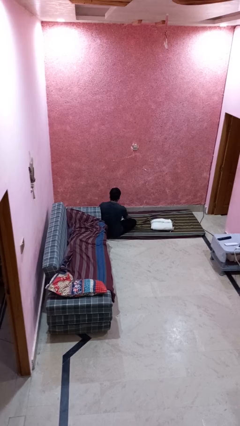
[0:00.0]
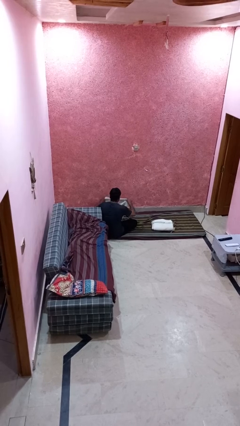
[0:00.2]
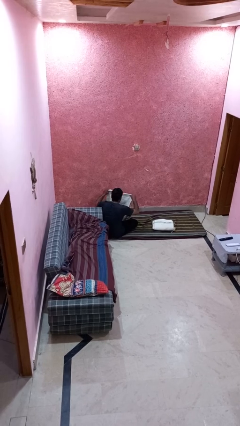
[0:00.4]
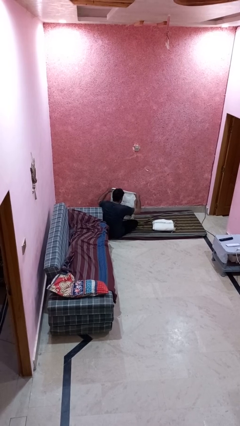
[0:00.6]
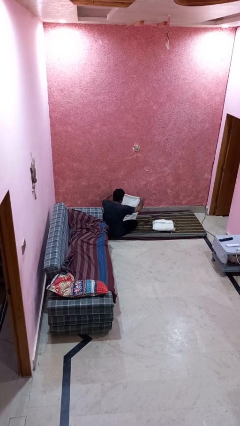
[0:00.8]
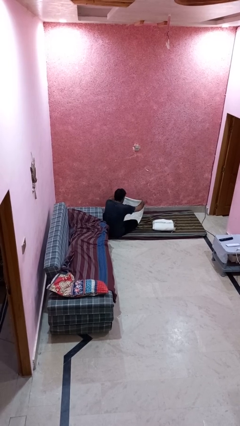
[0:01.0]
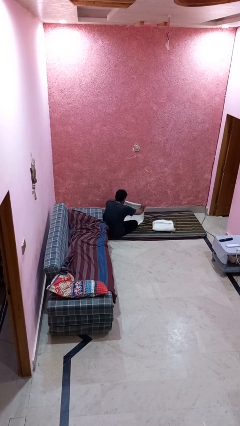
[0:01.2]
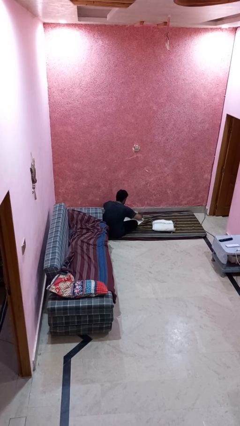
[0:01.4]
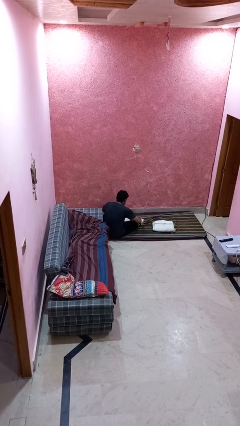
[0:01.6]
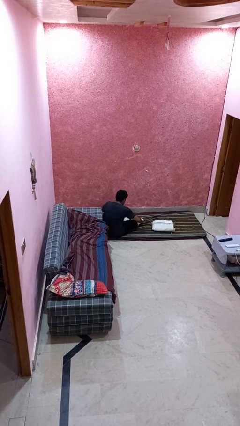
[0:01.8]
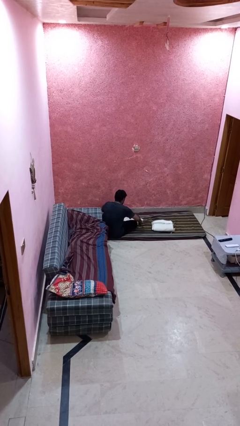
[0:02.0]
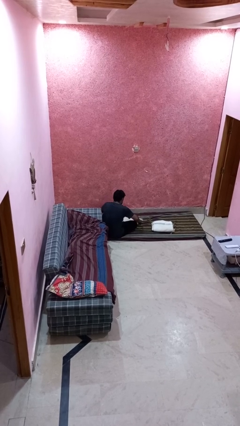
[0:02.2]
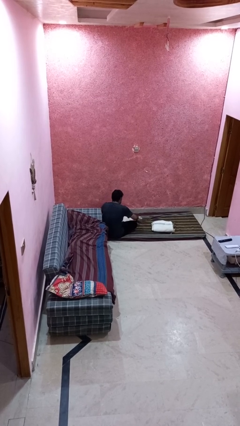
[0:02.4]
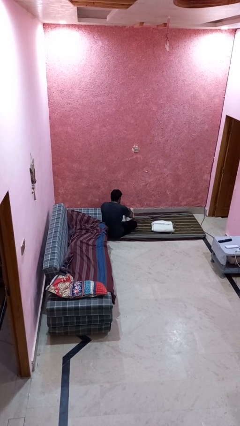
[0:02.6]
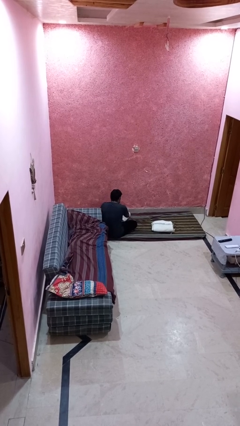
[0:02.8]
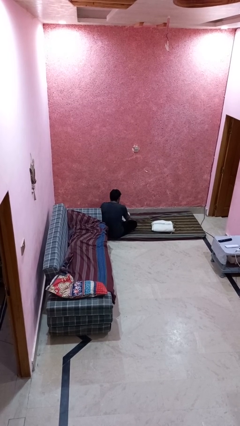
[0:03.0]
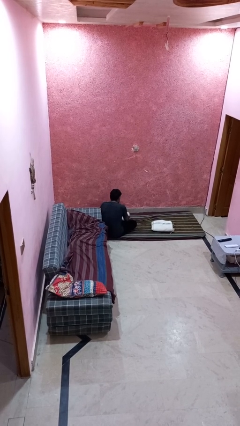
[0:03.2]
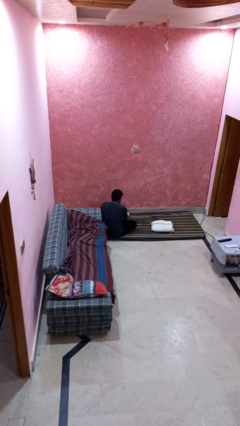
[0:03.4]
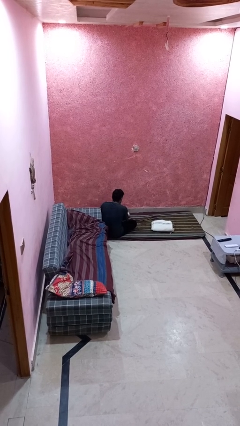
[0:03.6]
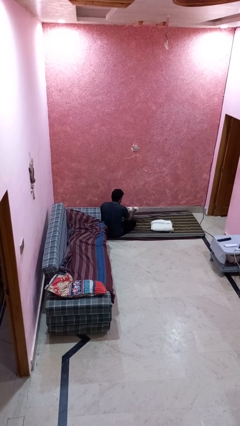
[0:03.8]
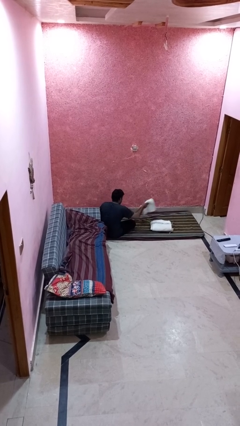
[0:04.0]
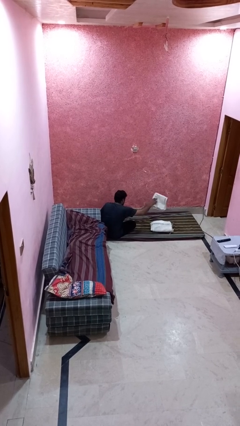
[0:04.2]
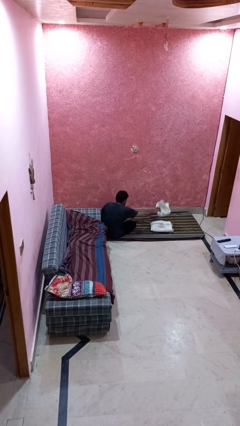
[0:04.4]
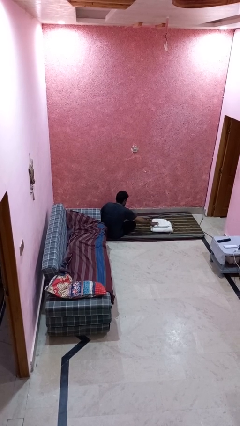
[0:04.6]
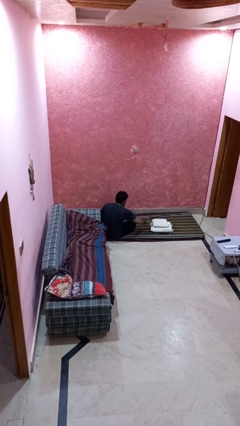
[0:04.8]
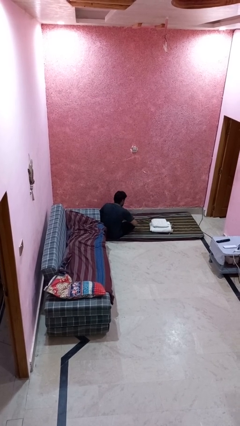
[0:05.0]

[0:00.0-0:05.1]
person folds towel

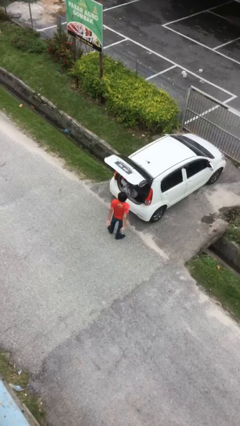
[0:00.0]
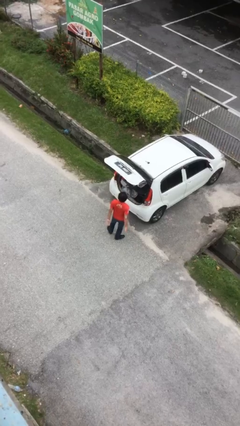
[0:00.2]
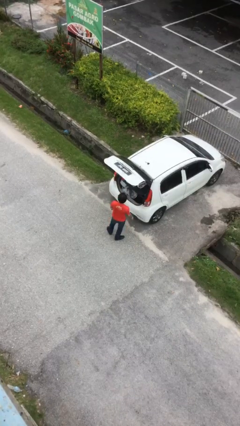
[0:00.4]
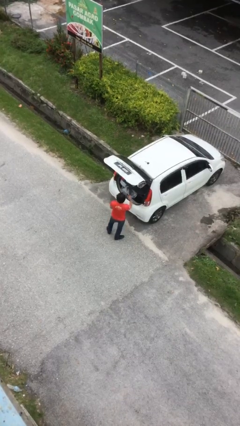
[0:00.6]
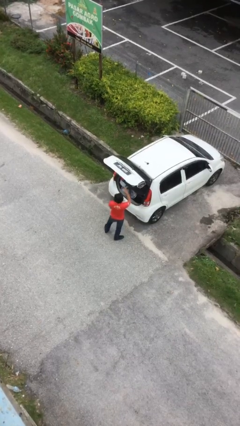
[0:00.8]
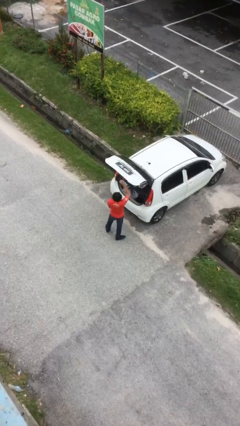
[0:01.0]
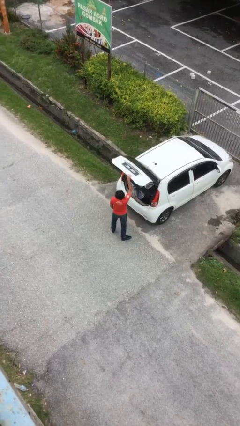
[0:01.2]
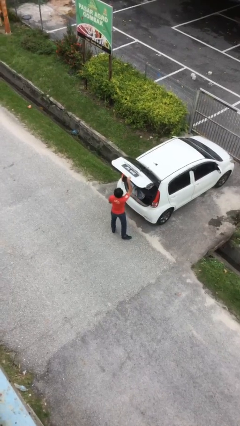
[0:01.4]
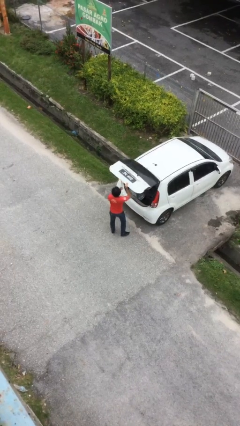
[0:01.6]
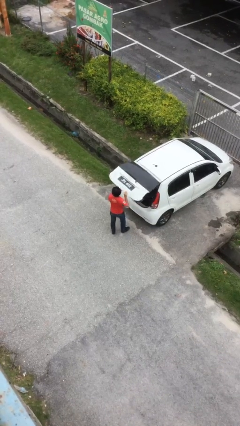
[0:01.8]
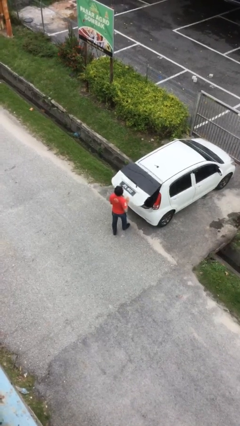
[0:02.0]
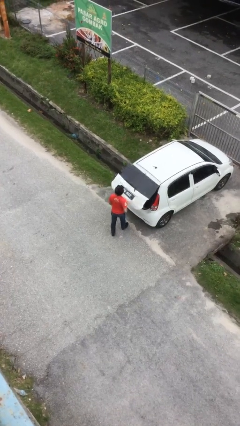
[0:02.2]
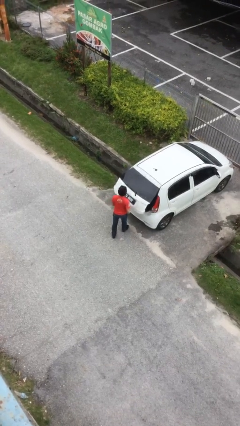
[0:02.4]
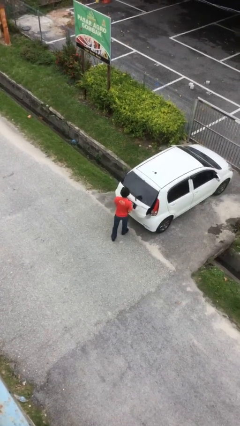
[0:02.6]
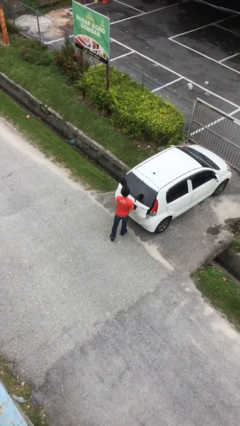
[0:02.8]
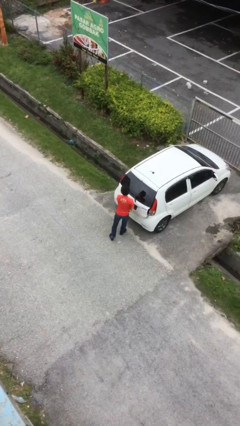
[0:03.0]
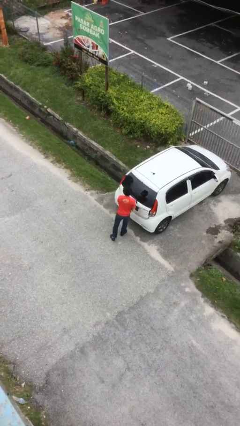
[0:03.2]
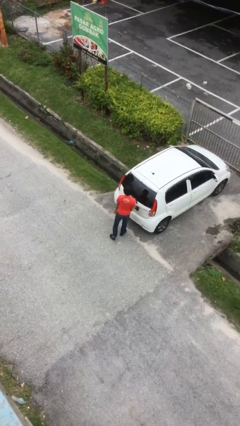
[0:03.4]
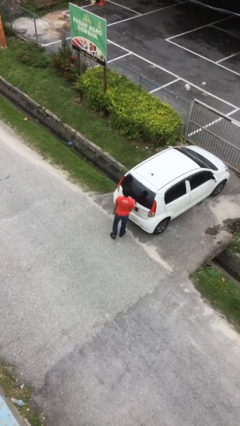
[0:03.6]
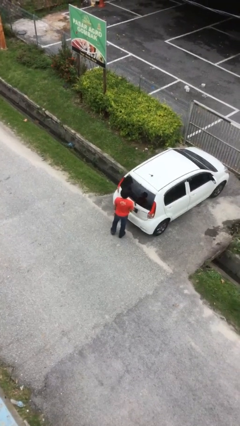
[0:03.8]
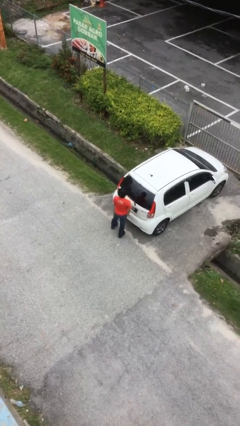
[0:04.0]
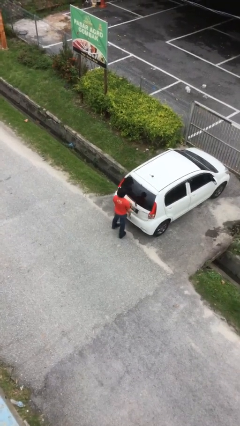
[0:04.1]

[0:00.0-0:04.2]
person closes car trunk

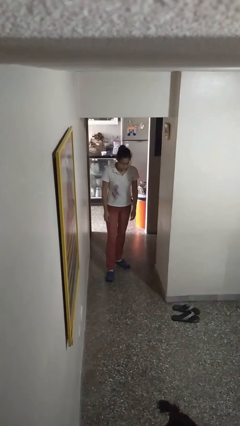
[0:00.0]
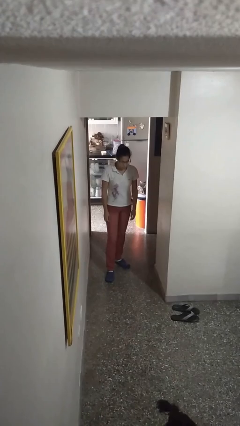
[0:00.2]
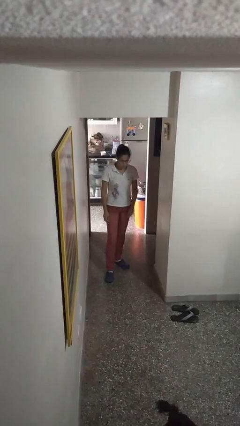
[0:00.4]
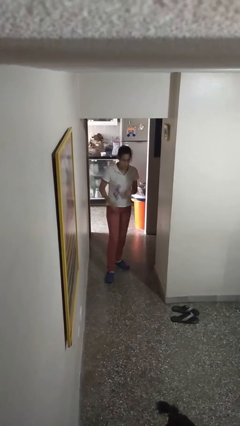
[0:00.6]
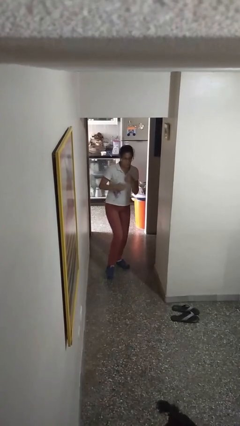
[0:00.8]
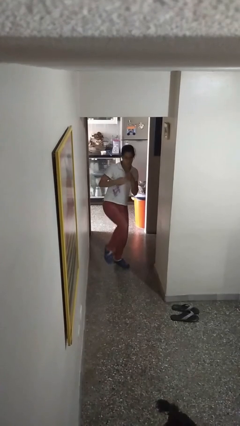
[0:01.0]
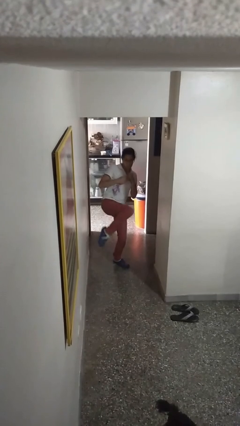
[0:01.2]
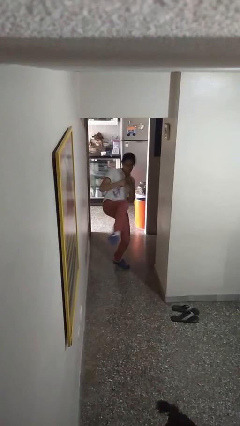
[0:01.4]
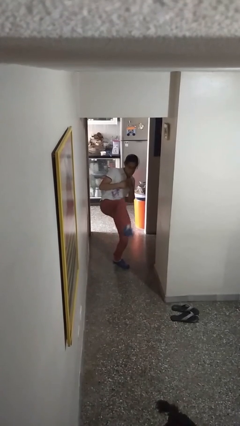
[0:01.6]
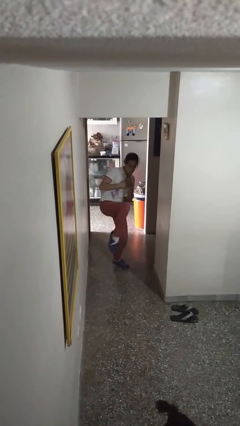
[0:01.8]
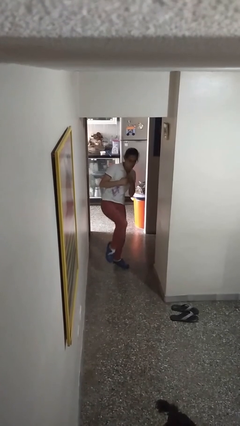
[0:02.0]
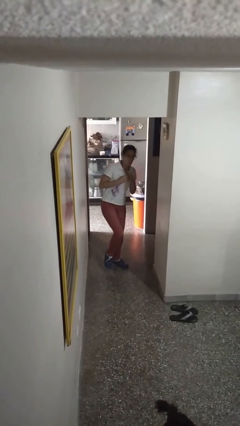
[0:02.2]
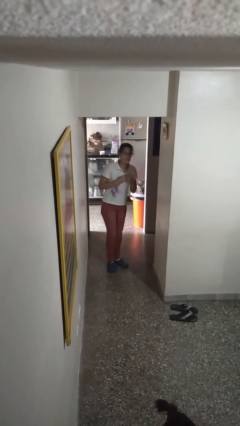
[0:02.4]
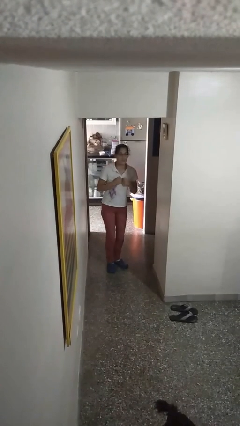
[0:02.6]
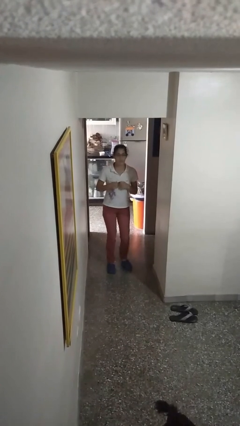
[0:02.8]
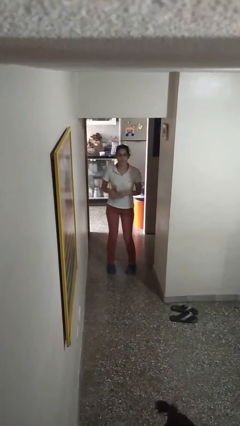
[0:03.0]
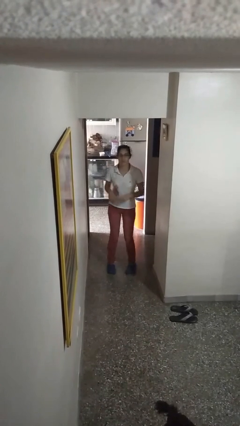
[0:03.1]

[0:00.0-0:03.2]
person karate kicks

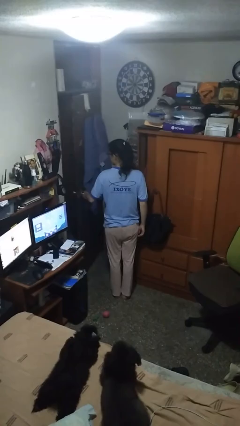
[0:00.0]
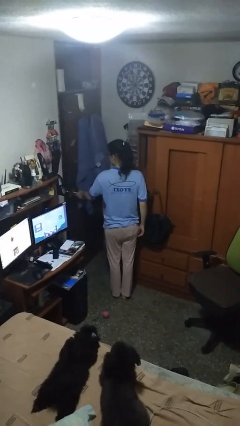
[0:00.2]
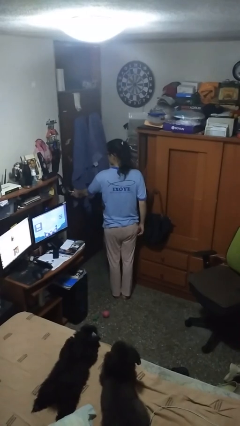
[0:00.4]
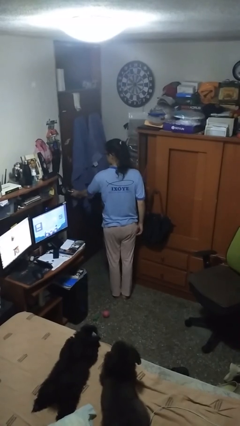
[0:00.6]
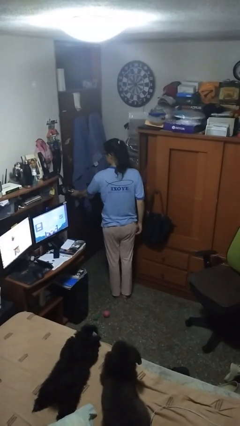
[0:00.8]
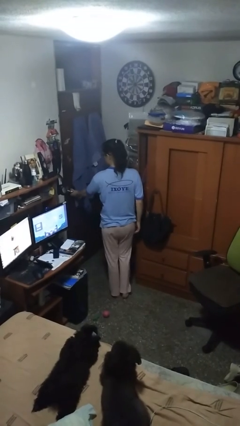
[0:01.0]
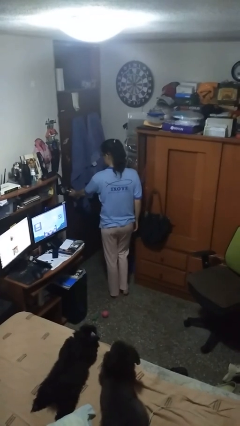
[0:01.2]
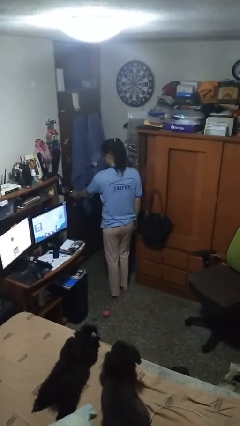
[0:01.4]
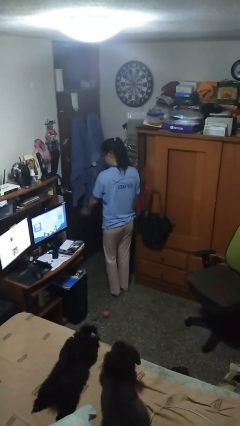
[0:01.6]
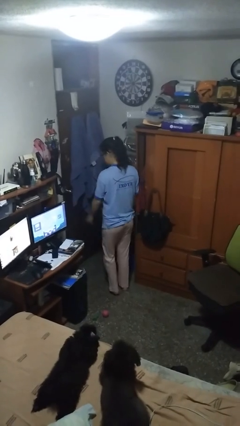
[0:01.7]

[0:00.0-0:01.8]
person closes facility door

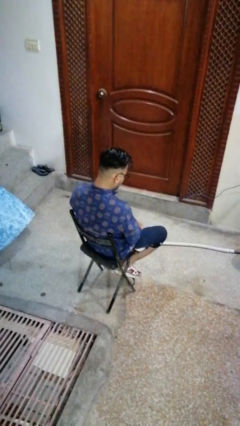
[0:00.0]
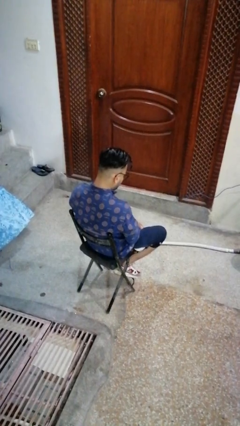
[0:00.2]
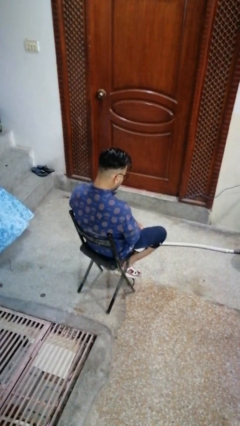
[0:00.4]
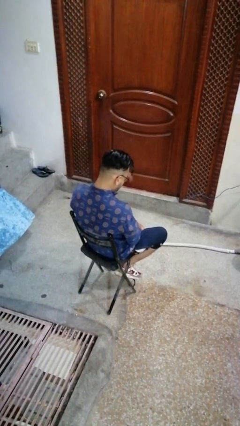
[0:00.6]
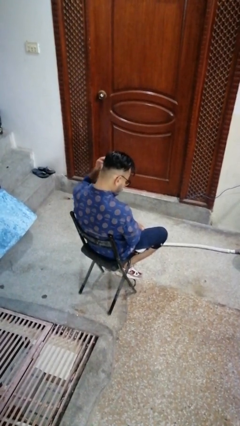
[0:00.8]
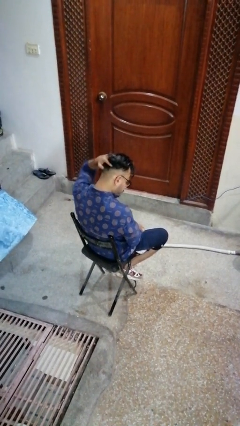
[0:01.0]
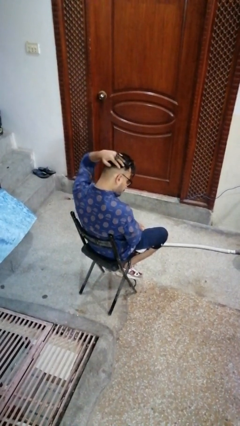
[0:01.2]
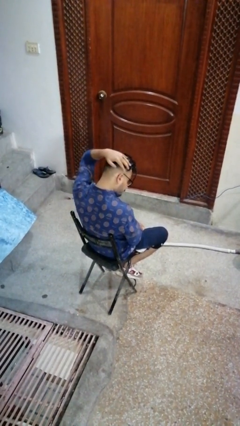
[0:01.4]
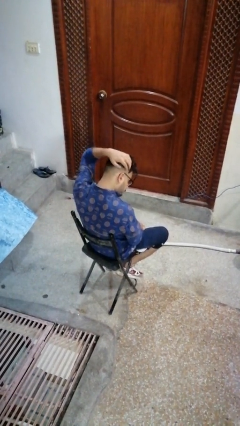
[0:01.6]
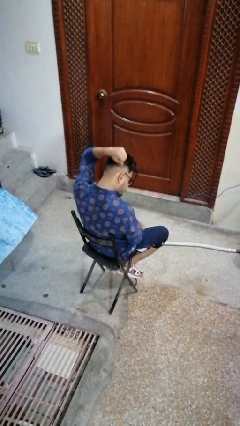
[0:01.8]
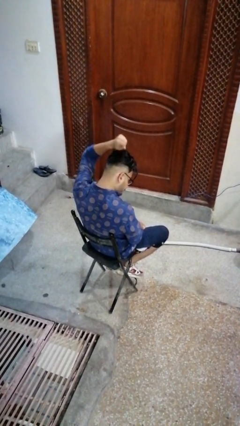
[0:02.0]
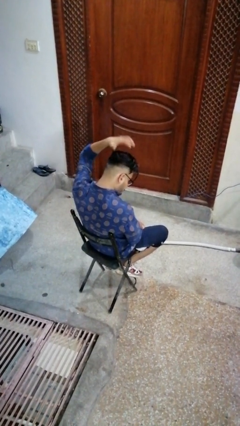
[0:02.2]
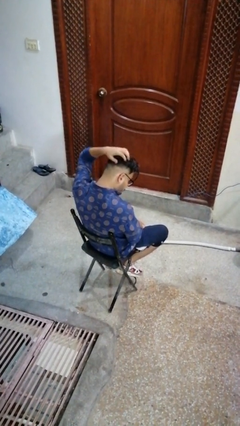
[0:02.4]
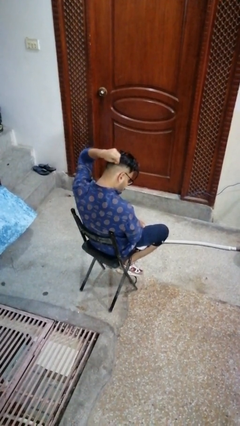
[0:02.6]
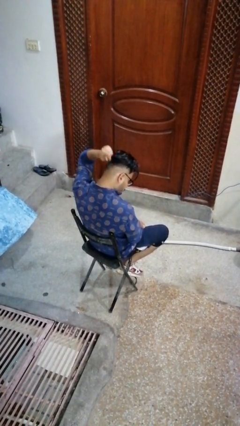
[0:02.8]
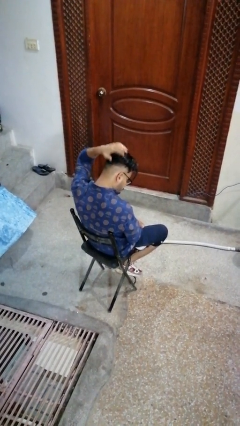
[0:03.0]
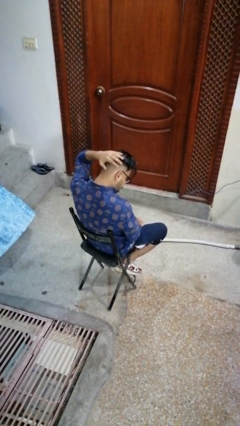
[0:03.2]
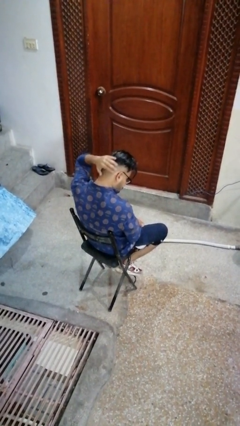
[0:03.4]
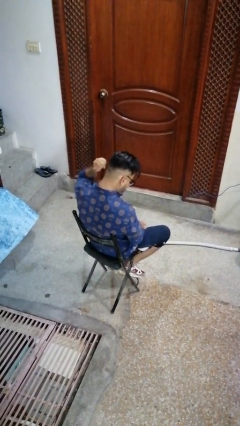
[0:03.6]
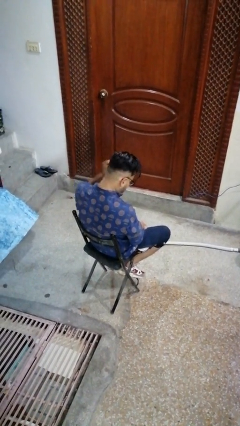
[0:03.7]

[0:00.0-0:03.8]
person strokes hair
